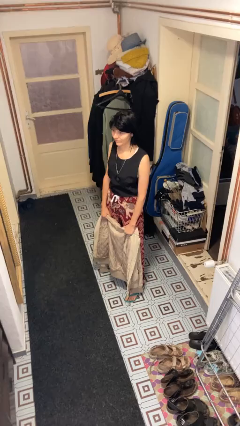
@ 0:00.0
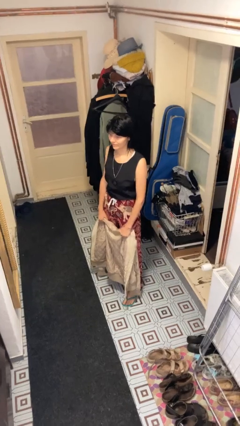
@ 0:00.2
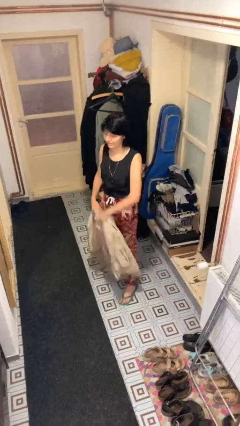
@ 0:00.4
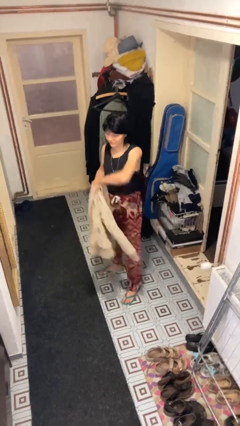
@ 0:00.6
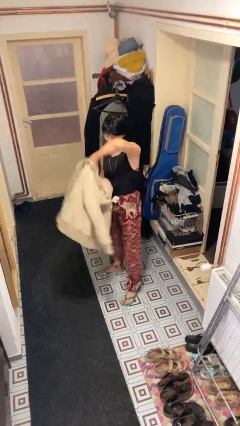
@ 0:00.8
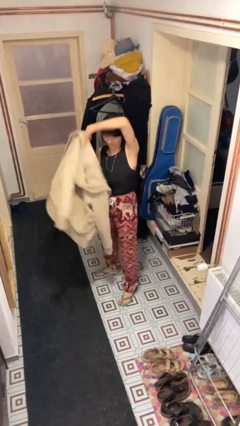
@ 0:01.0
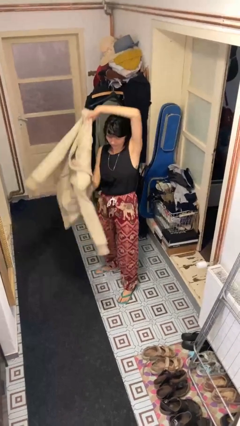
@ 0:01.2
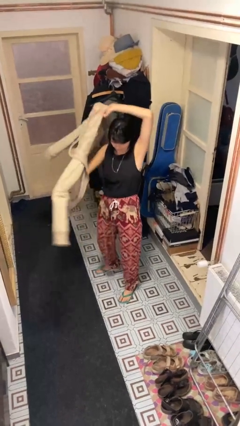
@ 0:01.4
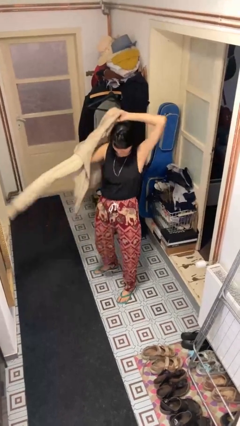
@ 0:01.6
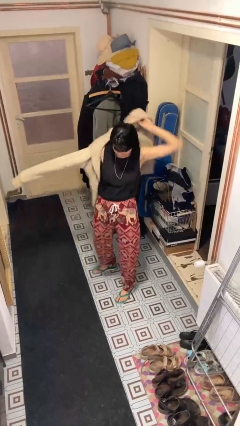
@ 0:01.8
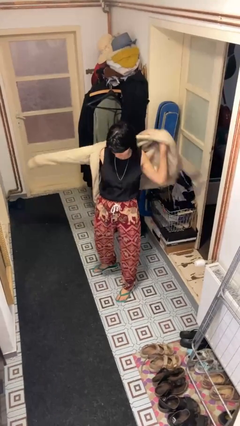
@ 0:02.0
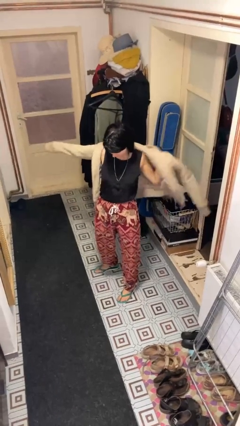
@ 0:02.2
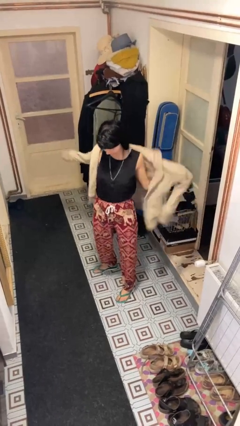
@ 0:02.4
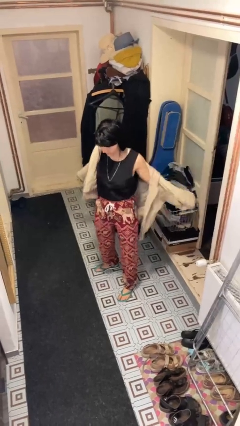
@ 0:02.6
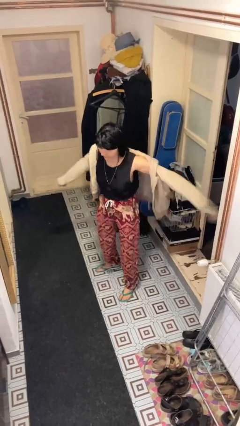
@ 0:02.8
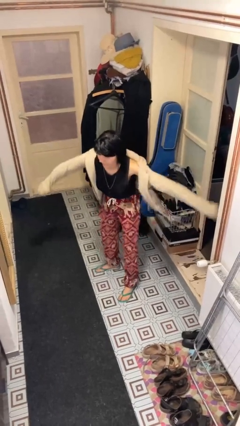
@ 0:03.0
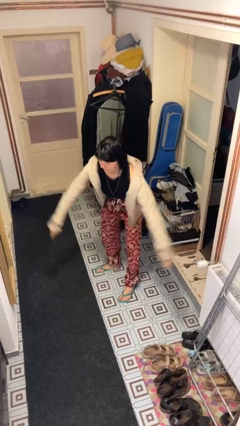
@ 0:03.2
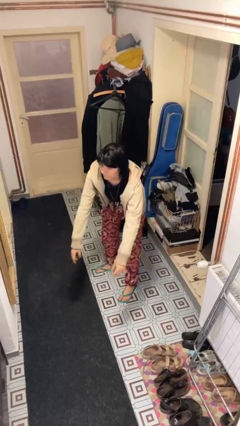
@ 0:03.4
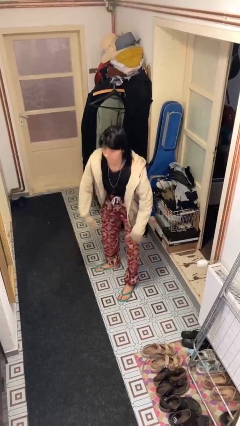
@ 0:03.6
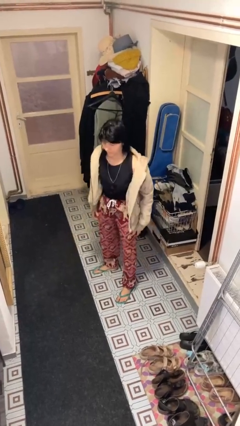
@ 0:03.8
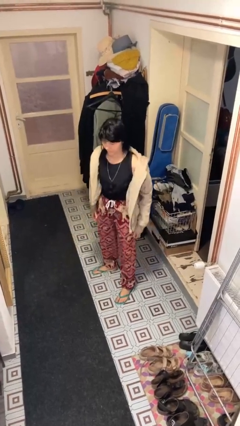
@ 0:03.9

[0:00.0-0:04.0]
person puts on jacket

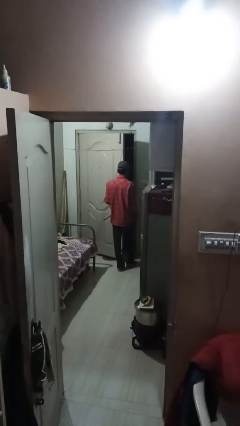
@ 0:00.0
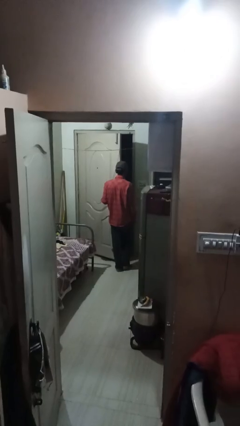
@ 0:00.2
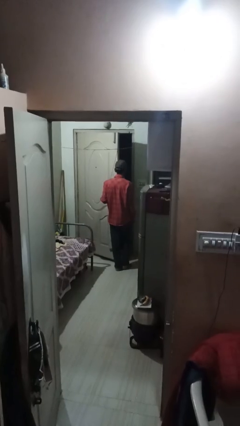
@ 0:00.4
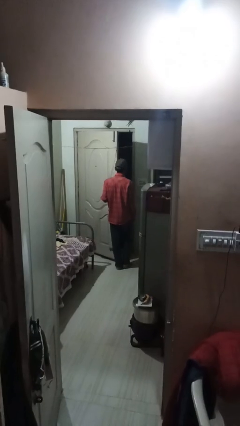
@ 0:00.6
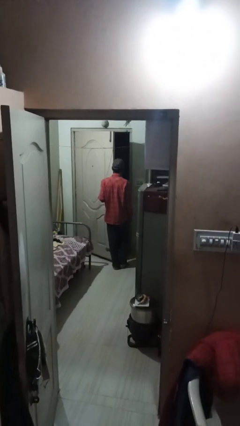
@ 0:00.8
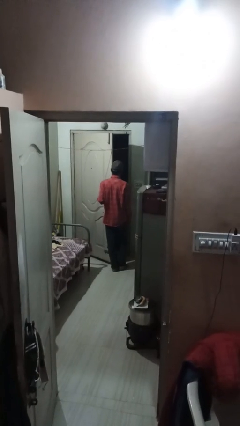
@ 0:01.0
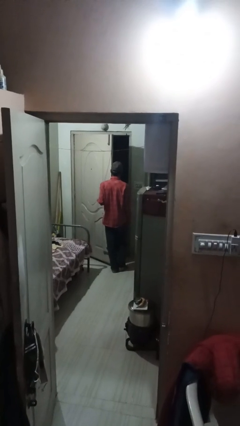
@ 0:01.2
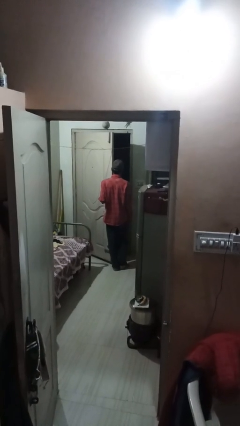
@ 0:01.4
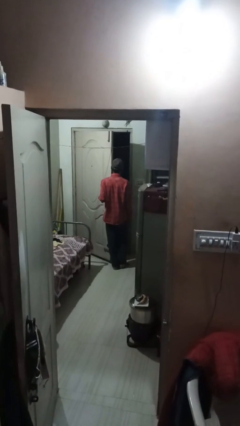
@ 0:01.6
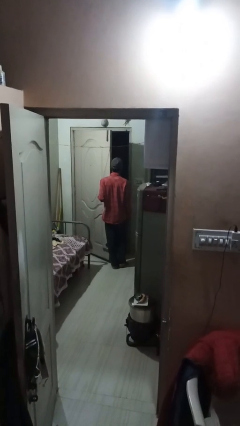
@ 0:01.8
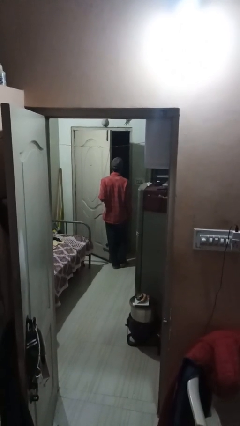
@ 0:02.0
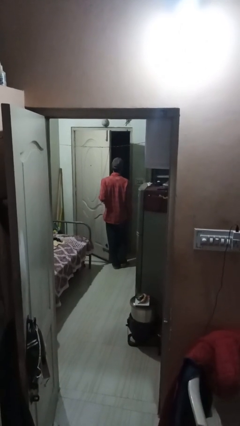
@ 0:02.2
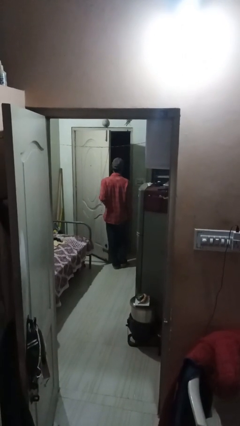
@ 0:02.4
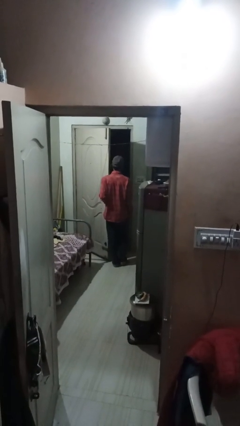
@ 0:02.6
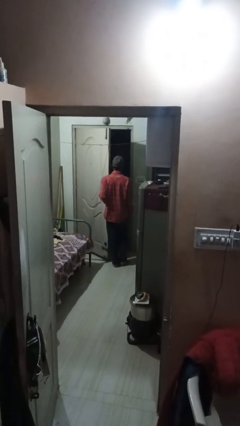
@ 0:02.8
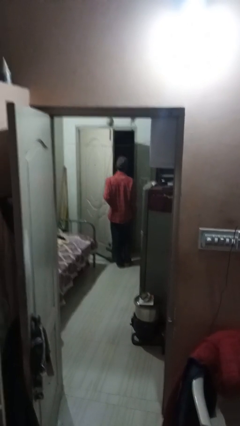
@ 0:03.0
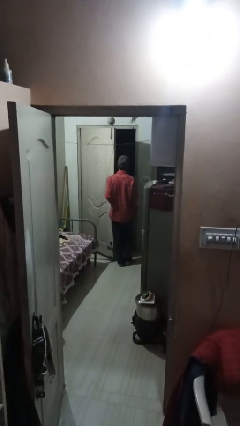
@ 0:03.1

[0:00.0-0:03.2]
person opens facility door

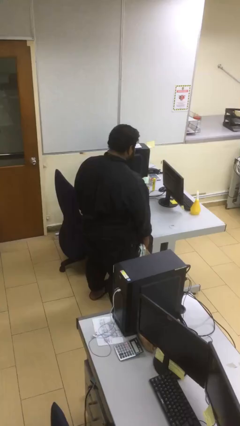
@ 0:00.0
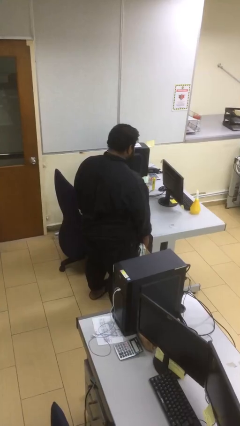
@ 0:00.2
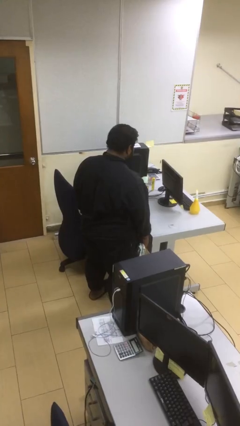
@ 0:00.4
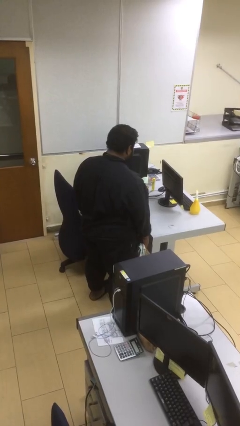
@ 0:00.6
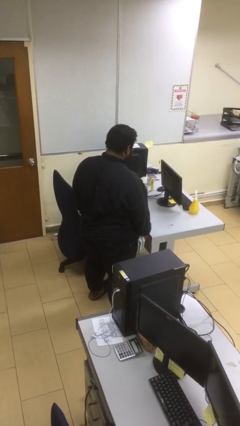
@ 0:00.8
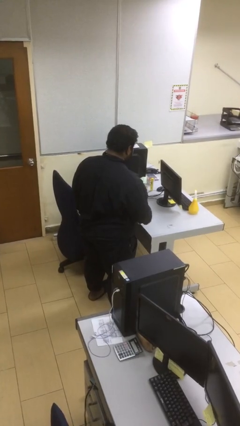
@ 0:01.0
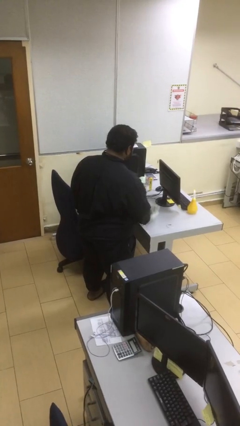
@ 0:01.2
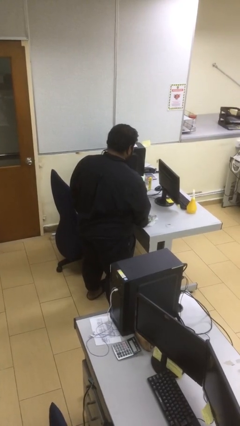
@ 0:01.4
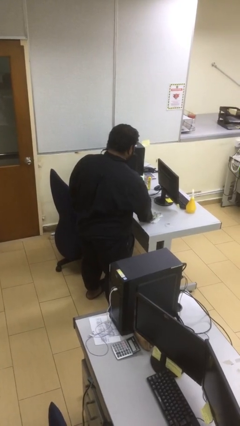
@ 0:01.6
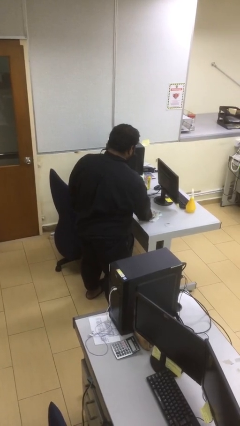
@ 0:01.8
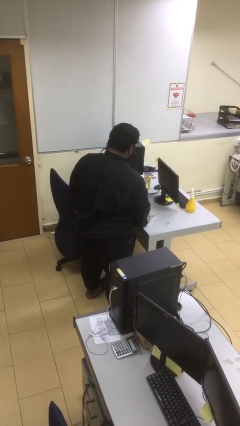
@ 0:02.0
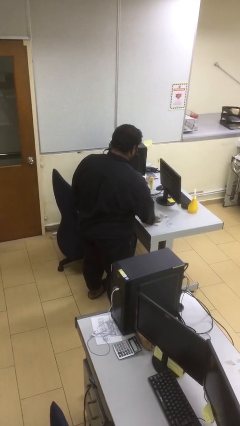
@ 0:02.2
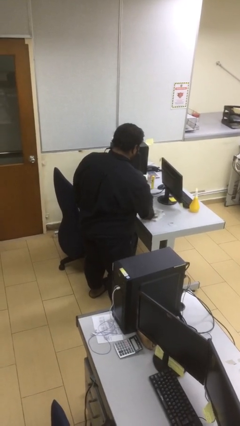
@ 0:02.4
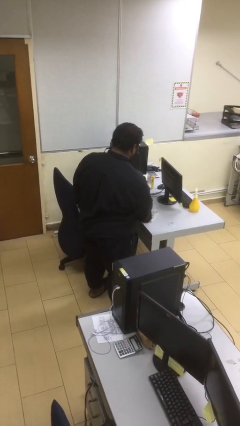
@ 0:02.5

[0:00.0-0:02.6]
person cleans table with rag

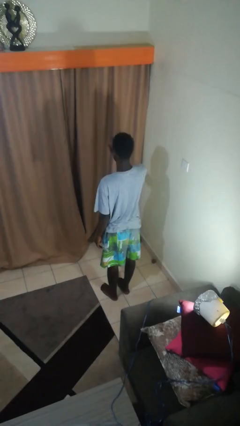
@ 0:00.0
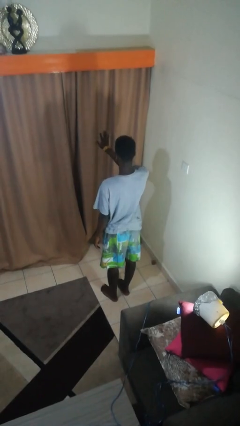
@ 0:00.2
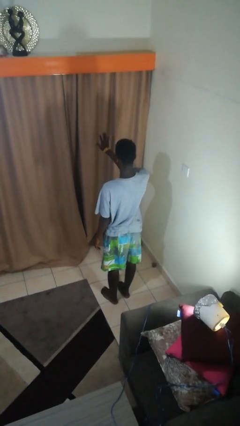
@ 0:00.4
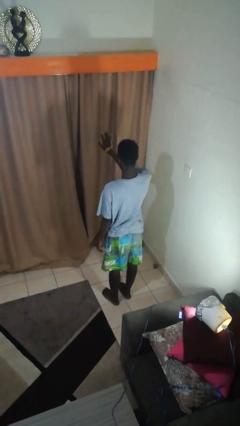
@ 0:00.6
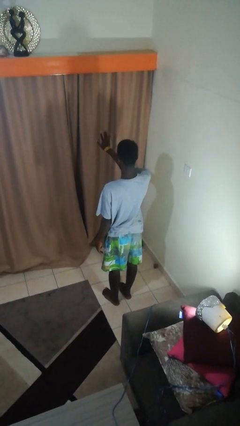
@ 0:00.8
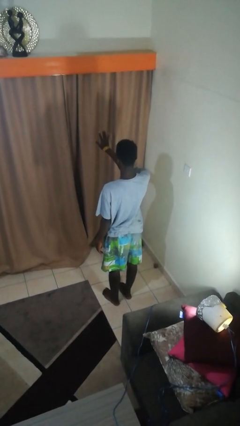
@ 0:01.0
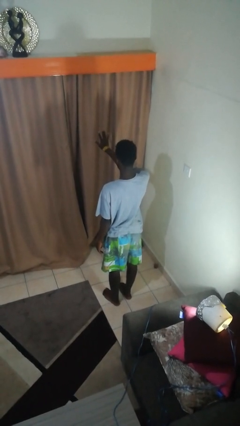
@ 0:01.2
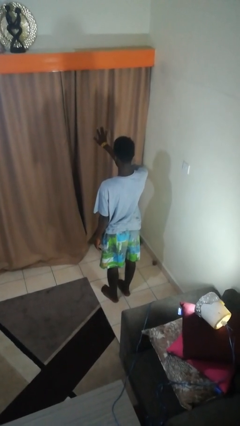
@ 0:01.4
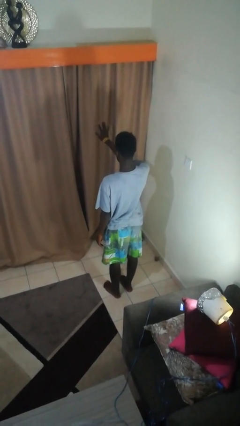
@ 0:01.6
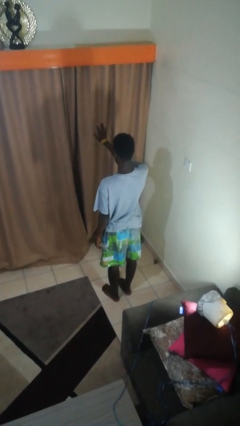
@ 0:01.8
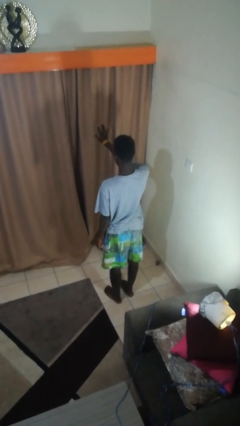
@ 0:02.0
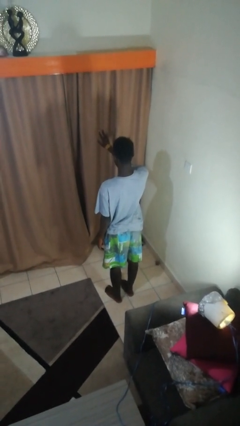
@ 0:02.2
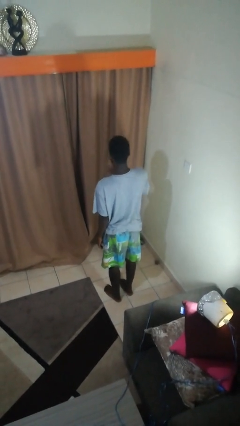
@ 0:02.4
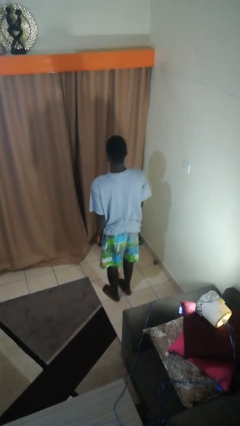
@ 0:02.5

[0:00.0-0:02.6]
person gestures number five

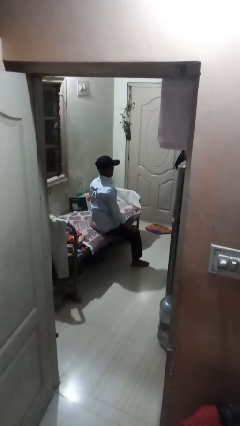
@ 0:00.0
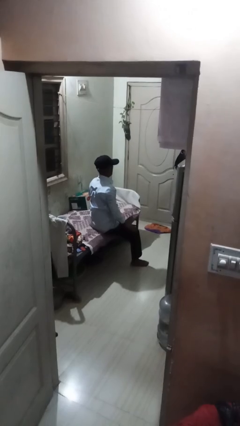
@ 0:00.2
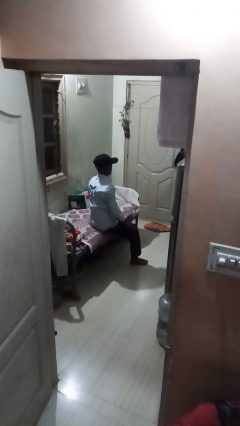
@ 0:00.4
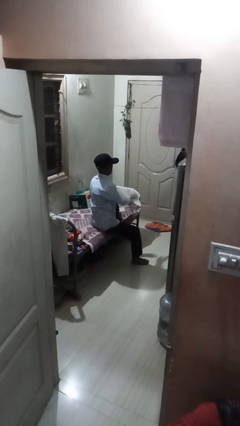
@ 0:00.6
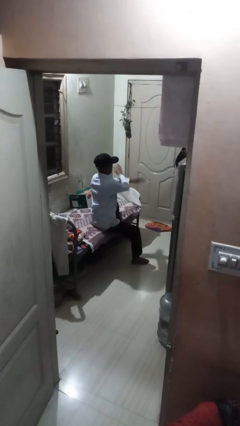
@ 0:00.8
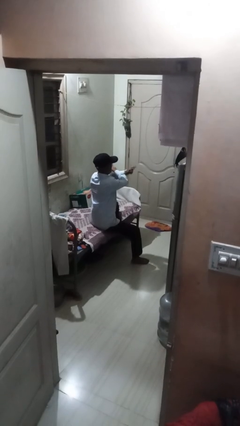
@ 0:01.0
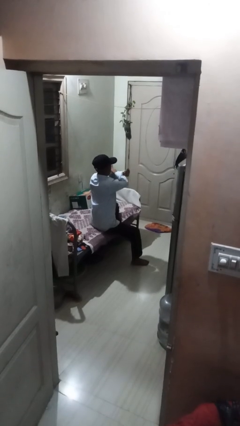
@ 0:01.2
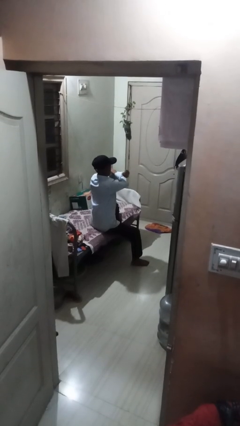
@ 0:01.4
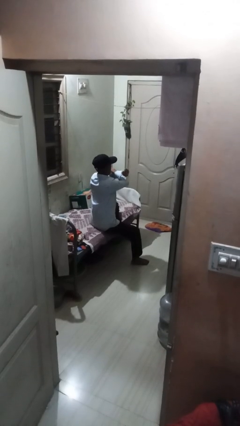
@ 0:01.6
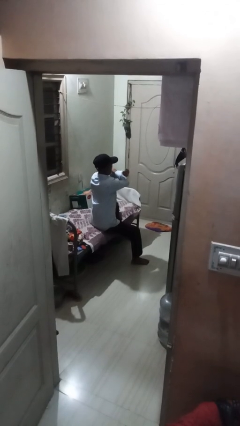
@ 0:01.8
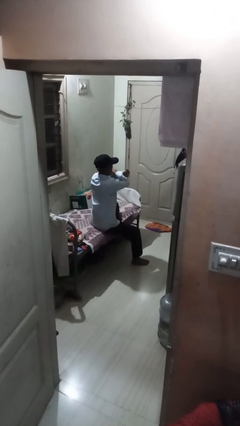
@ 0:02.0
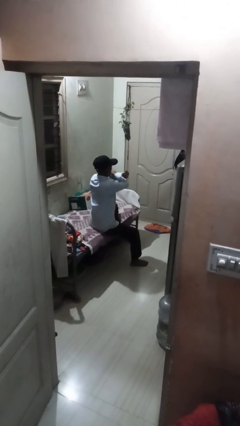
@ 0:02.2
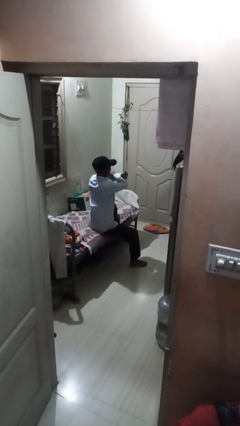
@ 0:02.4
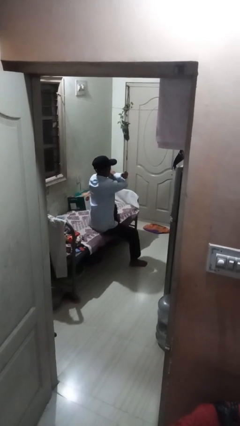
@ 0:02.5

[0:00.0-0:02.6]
person gestures arms x

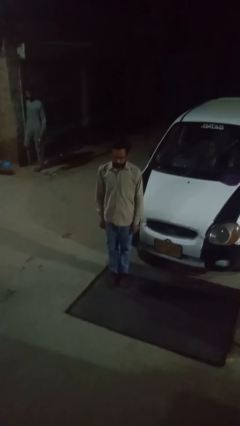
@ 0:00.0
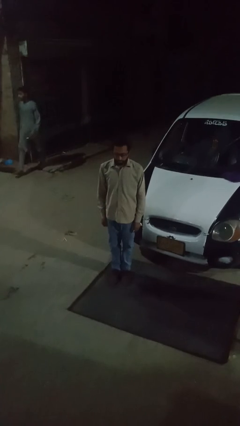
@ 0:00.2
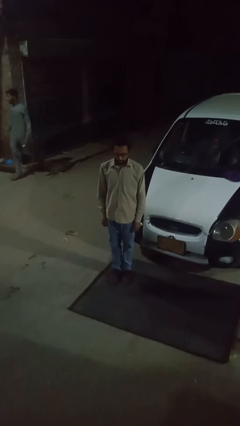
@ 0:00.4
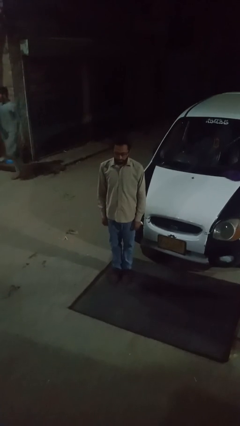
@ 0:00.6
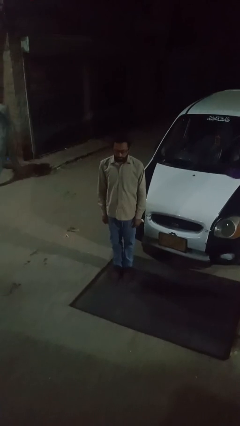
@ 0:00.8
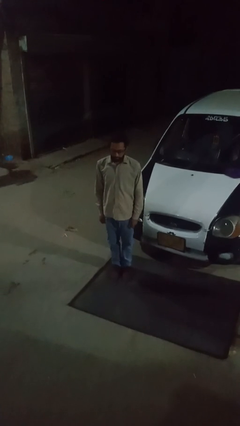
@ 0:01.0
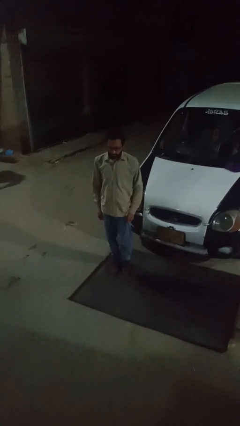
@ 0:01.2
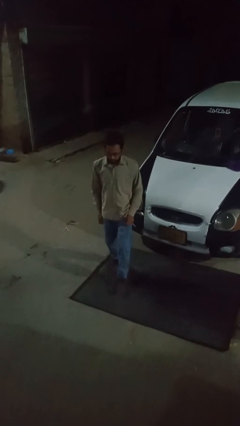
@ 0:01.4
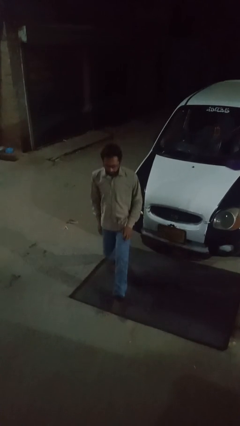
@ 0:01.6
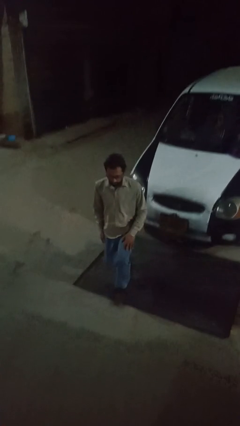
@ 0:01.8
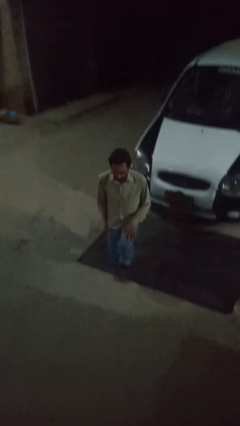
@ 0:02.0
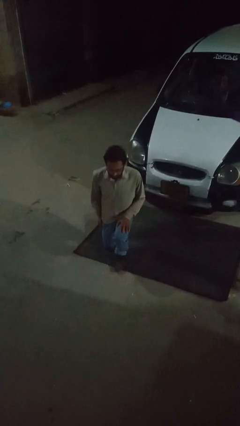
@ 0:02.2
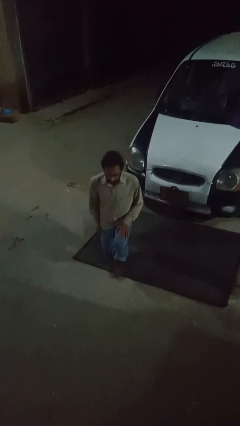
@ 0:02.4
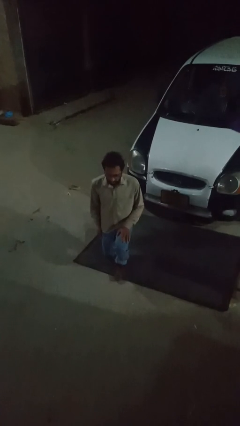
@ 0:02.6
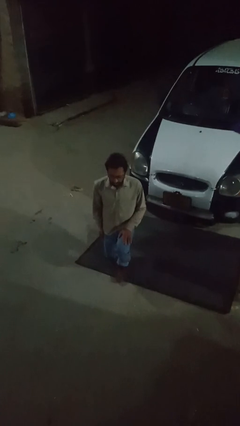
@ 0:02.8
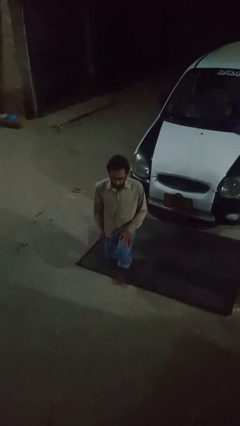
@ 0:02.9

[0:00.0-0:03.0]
person squats
